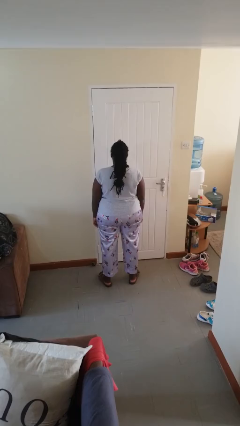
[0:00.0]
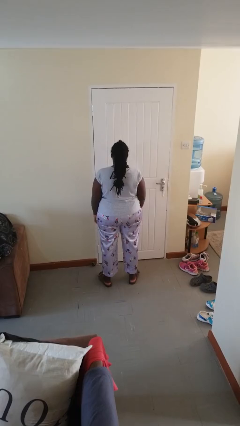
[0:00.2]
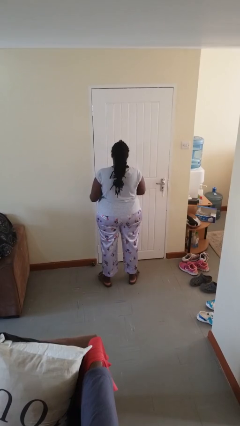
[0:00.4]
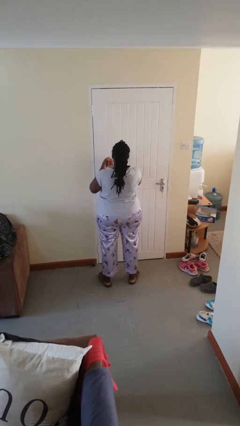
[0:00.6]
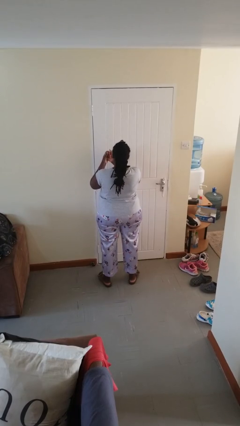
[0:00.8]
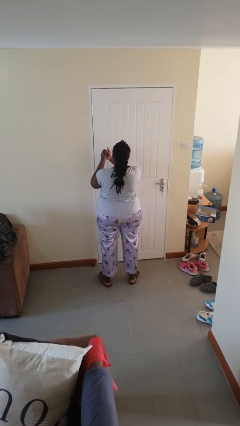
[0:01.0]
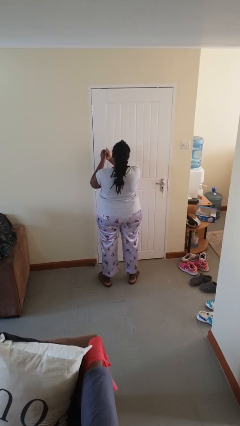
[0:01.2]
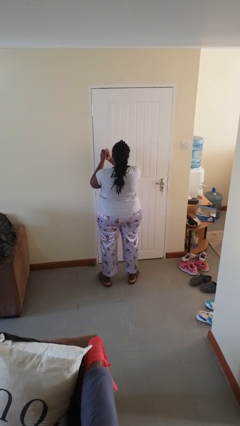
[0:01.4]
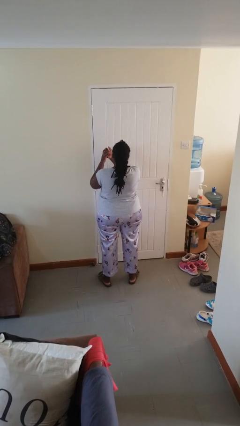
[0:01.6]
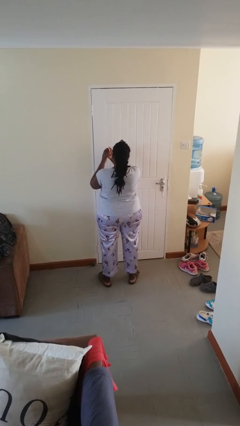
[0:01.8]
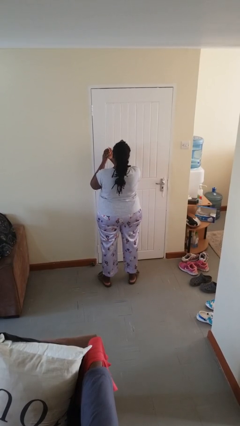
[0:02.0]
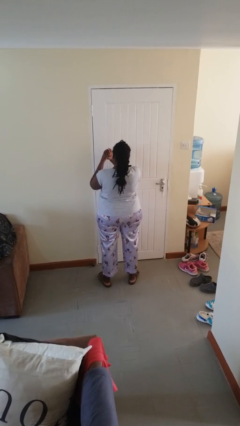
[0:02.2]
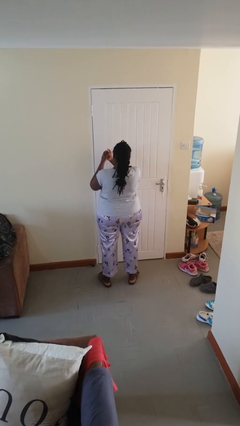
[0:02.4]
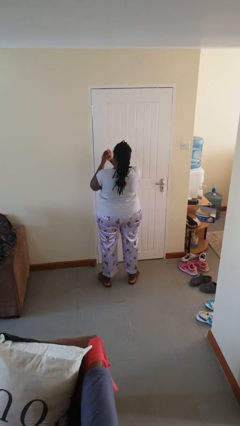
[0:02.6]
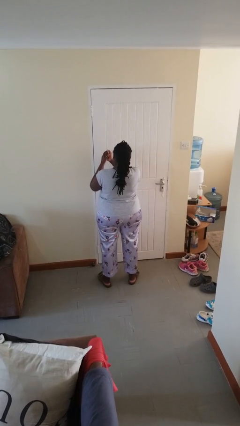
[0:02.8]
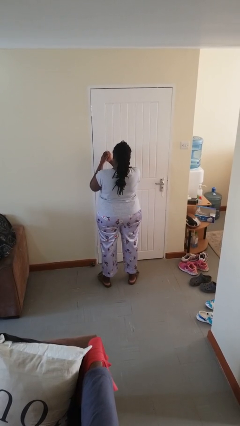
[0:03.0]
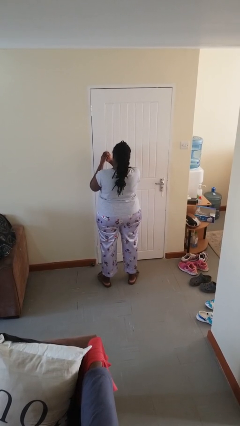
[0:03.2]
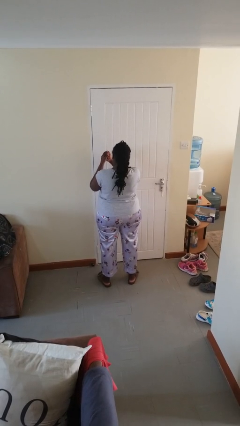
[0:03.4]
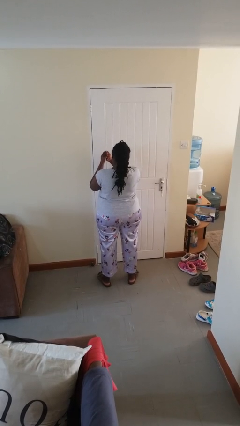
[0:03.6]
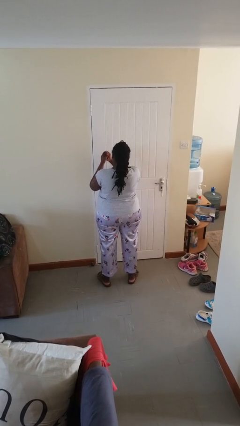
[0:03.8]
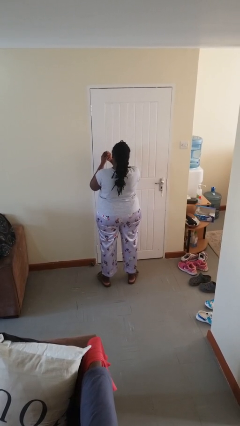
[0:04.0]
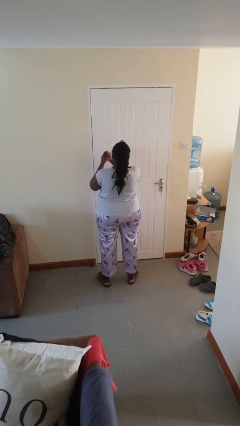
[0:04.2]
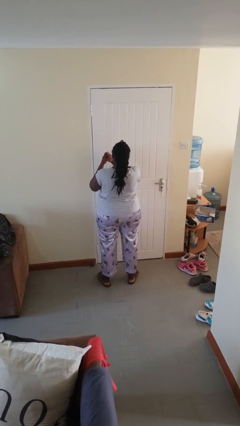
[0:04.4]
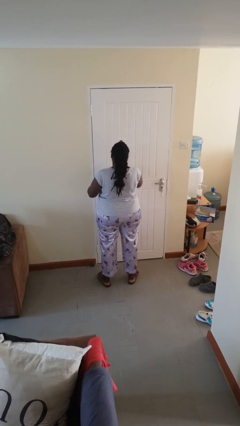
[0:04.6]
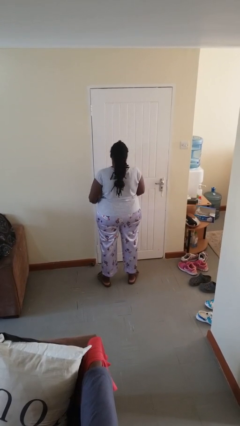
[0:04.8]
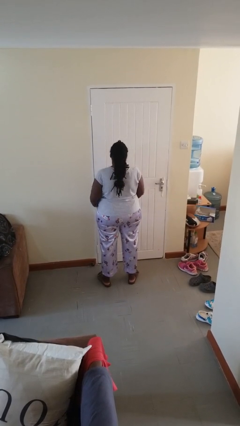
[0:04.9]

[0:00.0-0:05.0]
person cracks knuckles

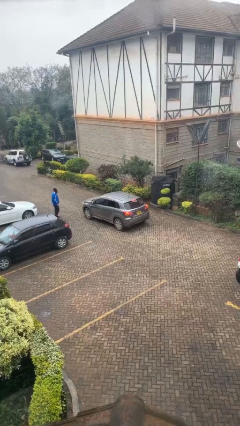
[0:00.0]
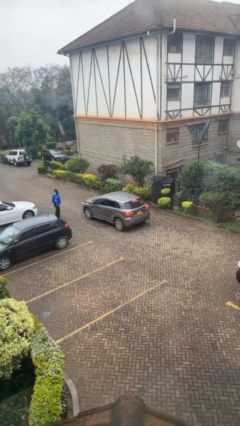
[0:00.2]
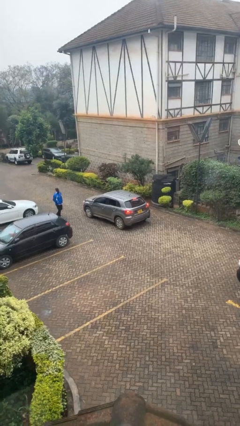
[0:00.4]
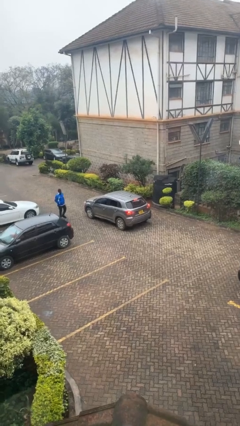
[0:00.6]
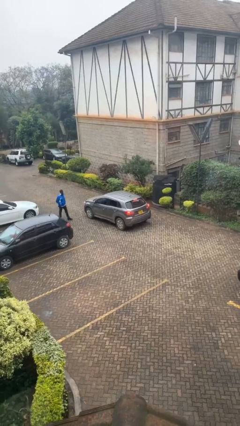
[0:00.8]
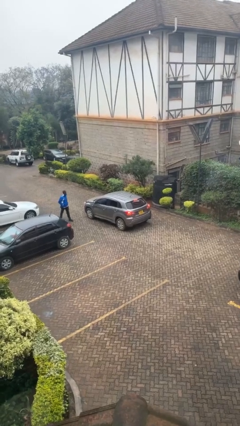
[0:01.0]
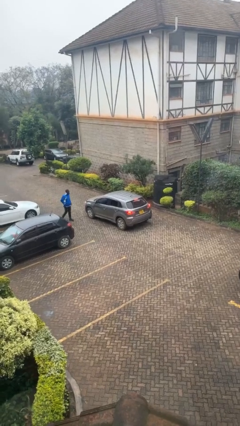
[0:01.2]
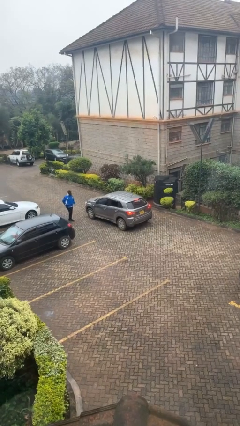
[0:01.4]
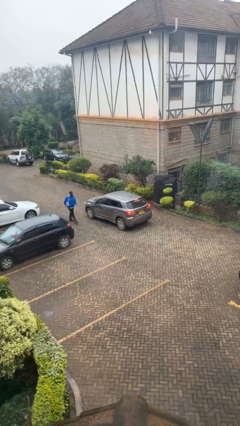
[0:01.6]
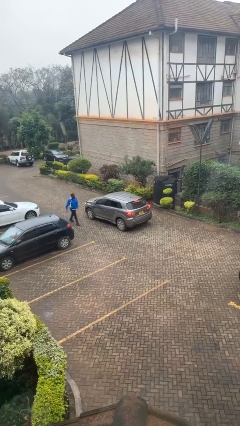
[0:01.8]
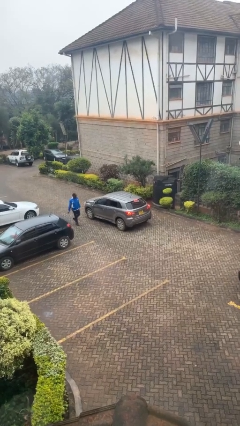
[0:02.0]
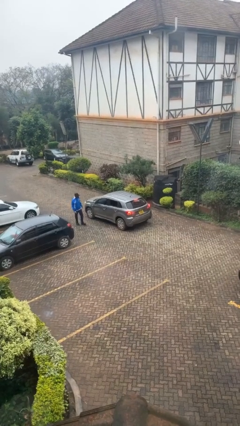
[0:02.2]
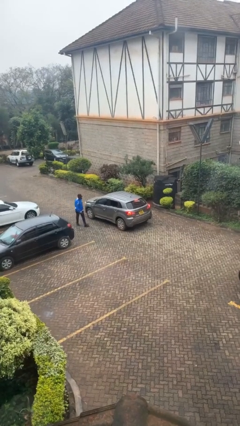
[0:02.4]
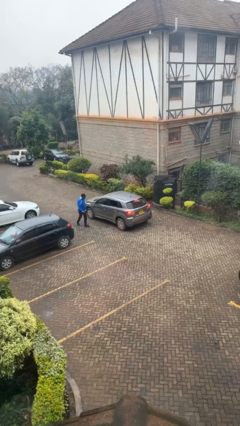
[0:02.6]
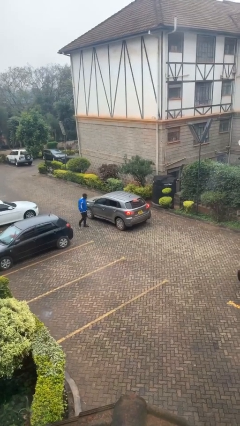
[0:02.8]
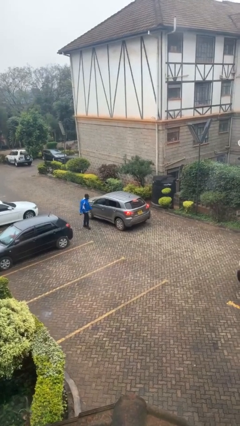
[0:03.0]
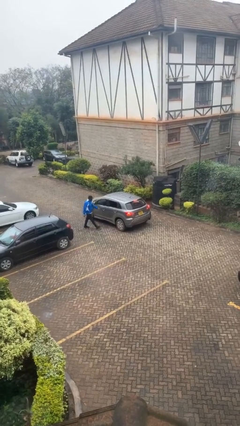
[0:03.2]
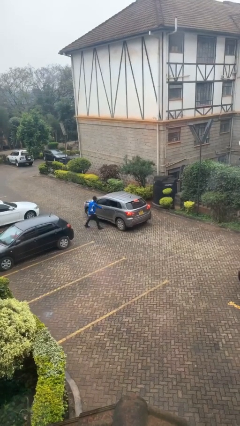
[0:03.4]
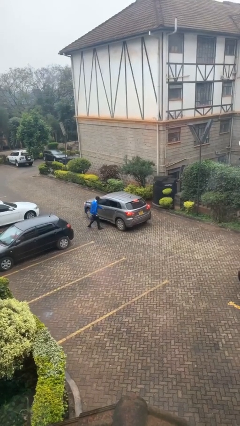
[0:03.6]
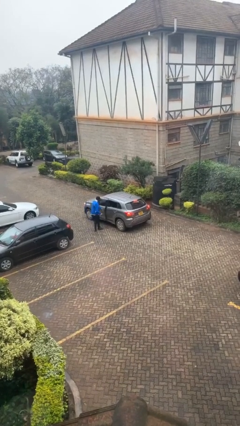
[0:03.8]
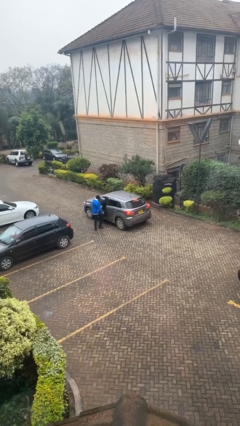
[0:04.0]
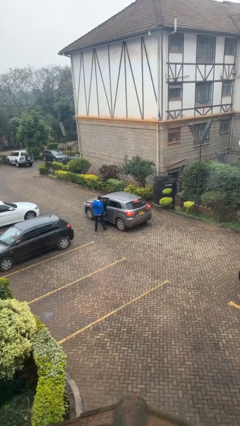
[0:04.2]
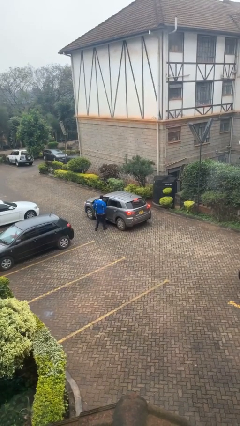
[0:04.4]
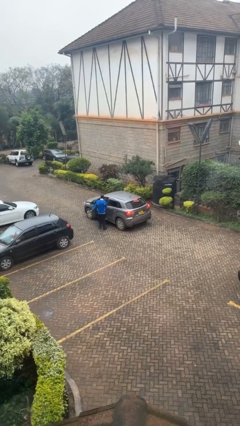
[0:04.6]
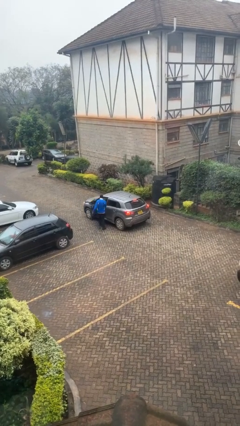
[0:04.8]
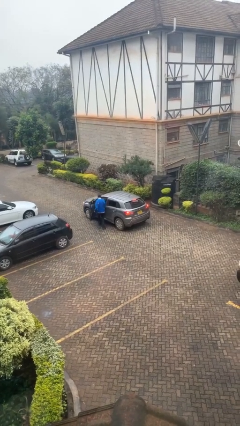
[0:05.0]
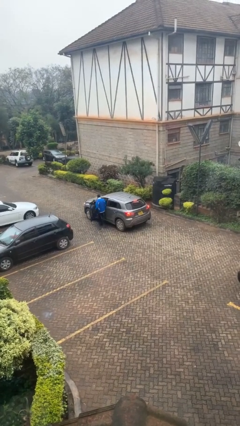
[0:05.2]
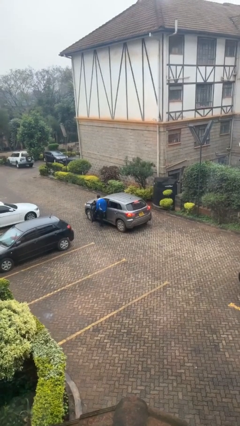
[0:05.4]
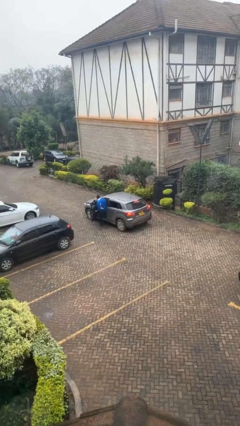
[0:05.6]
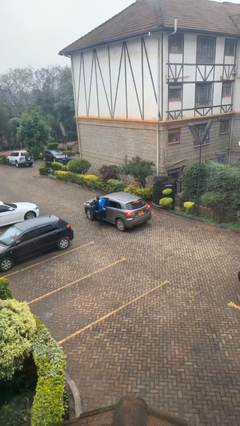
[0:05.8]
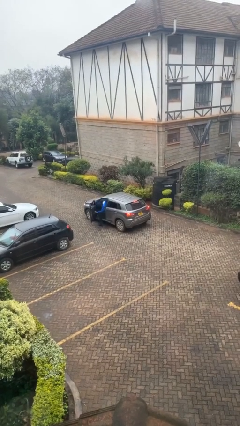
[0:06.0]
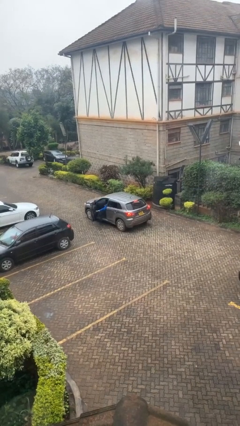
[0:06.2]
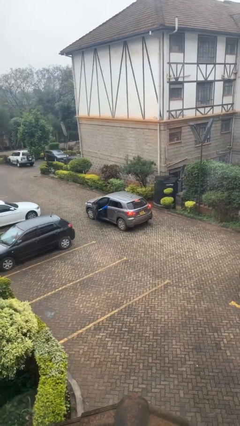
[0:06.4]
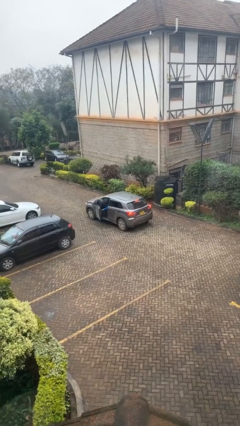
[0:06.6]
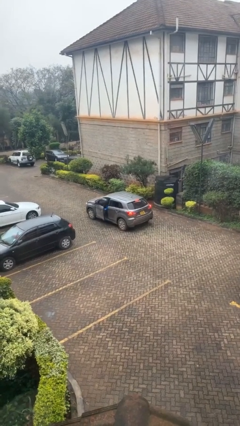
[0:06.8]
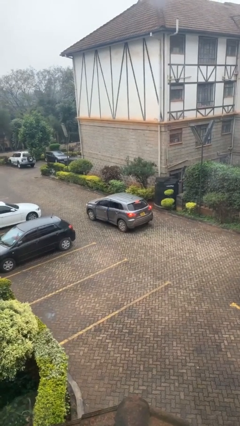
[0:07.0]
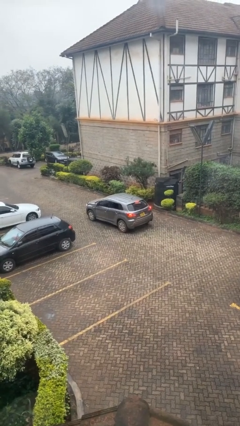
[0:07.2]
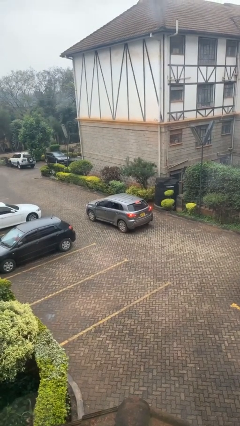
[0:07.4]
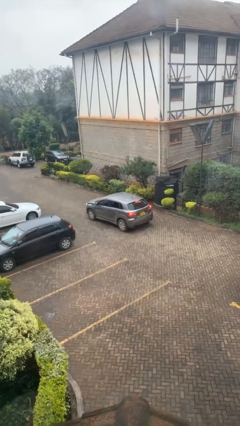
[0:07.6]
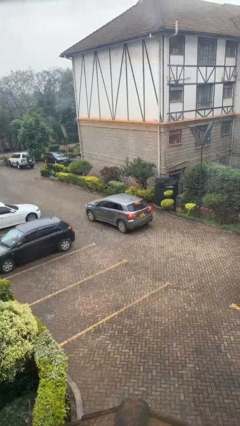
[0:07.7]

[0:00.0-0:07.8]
car picks up person

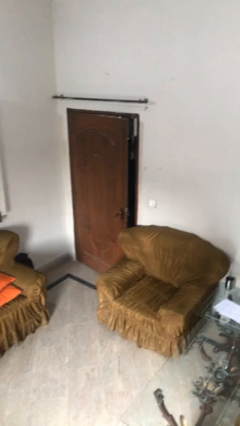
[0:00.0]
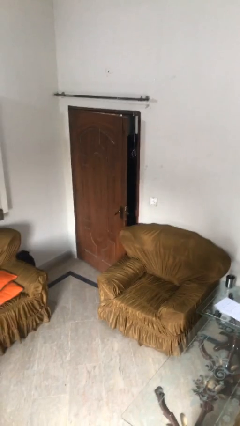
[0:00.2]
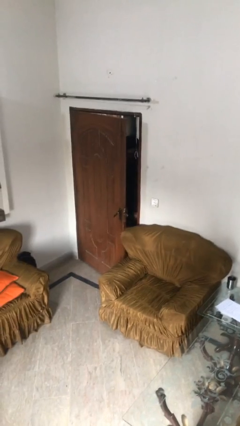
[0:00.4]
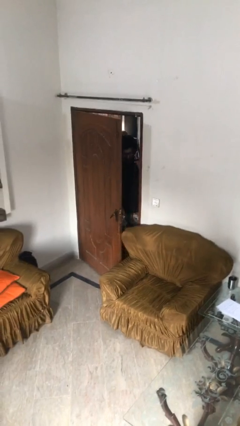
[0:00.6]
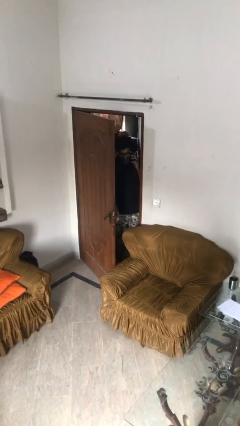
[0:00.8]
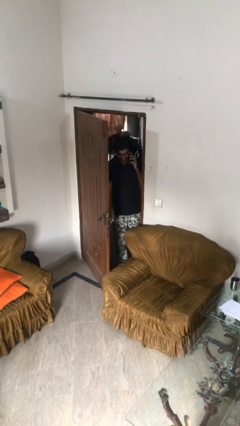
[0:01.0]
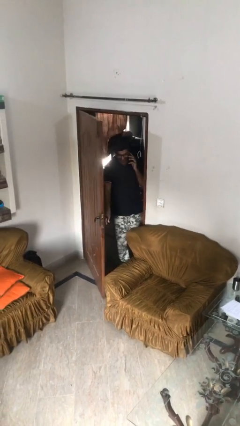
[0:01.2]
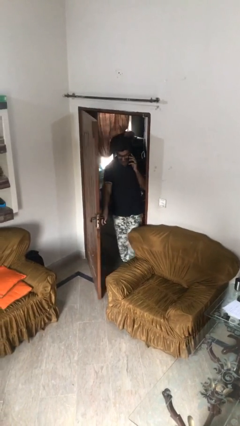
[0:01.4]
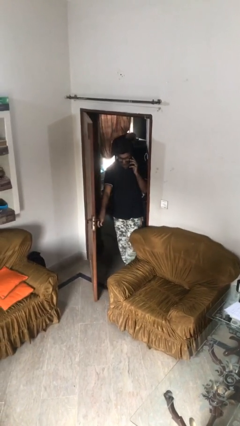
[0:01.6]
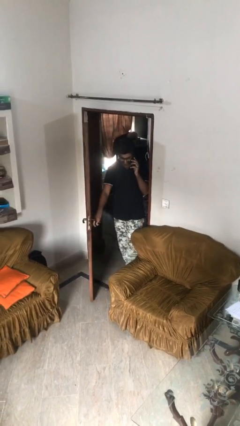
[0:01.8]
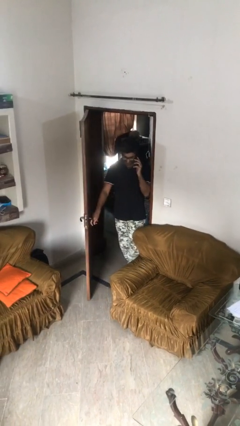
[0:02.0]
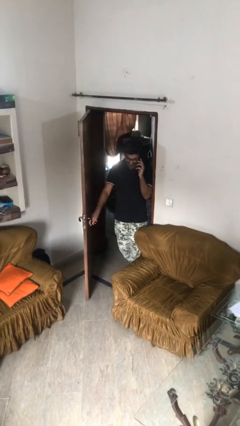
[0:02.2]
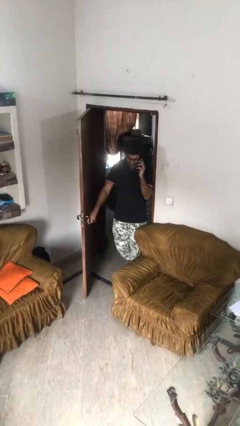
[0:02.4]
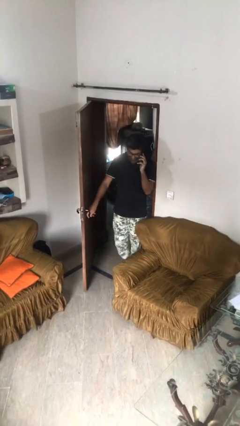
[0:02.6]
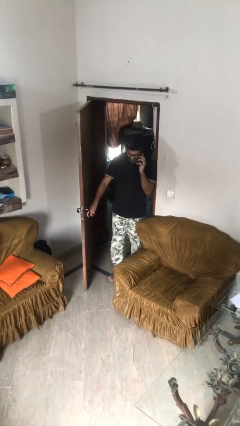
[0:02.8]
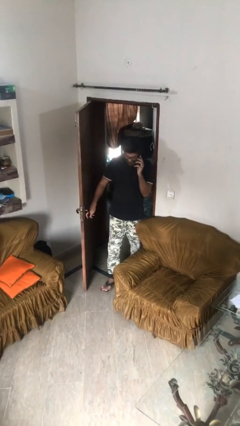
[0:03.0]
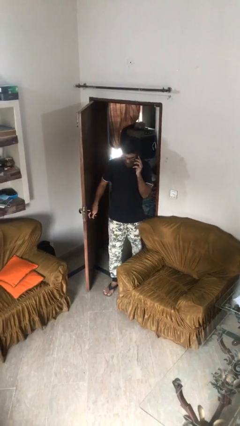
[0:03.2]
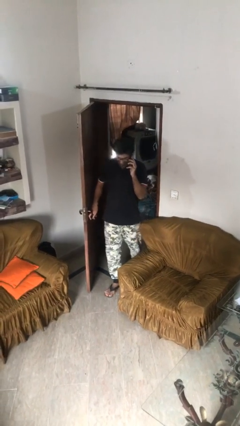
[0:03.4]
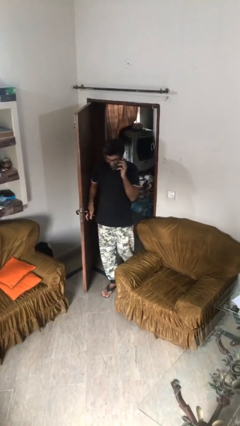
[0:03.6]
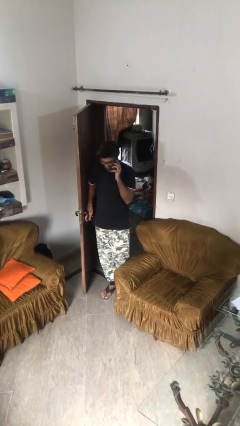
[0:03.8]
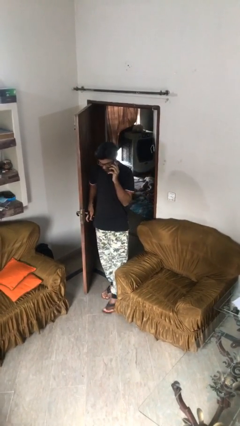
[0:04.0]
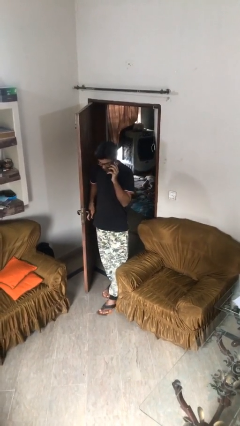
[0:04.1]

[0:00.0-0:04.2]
person opens facility door

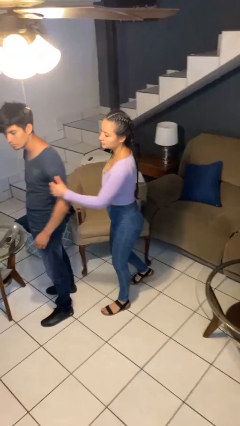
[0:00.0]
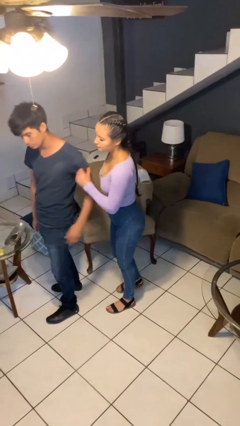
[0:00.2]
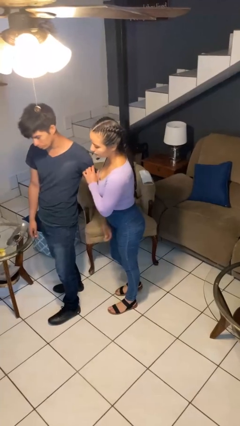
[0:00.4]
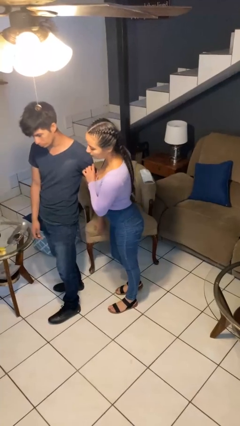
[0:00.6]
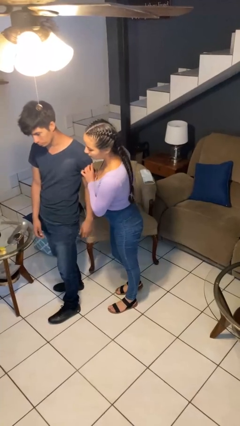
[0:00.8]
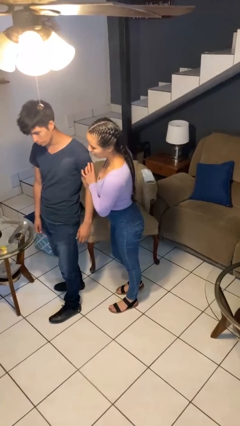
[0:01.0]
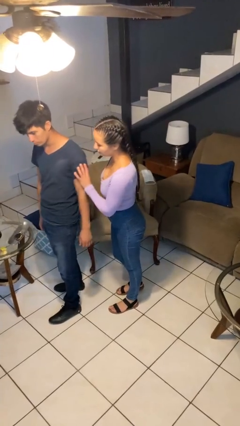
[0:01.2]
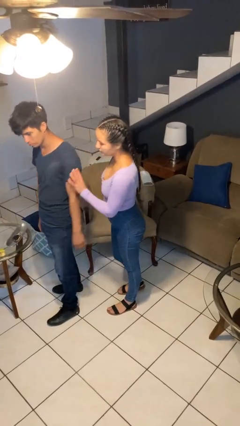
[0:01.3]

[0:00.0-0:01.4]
person grabs person by bicep
